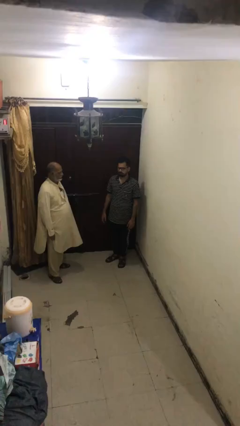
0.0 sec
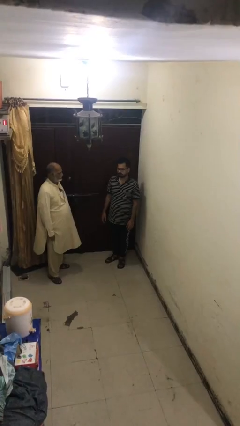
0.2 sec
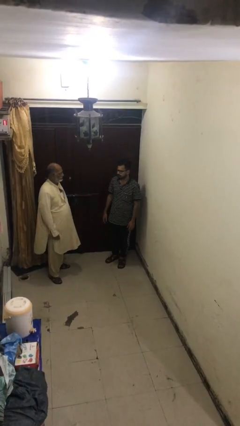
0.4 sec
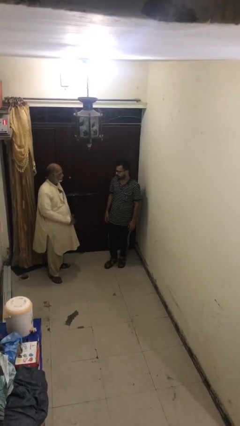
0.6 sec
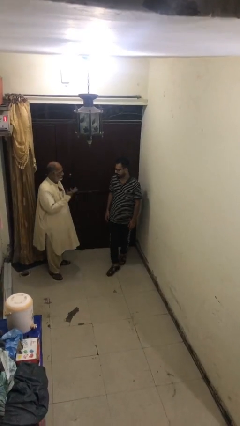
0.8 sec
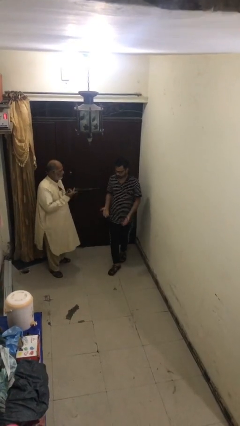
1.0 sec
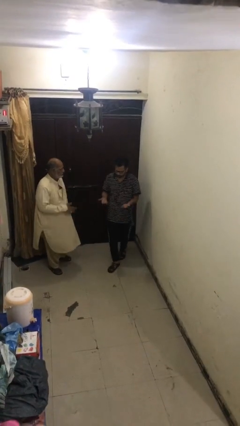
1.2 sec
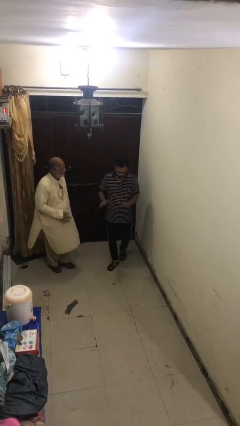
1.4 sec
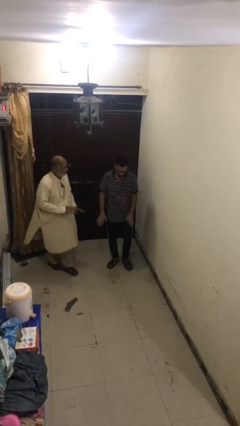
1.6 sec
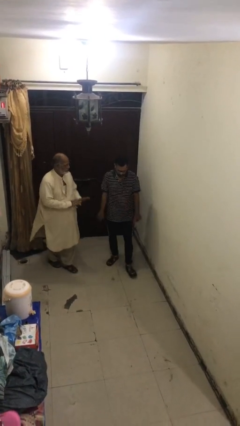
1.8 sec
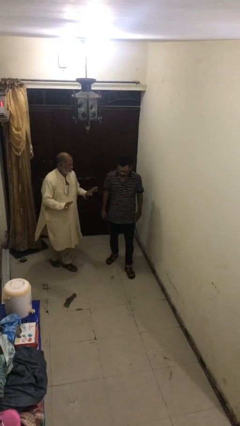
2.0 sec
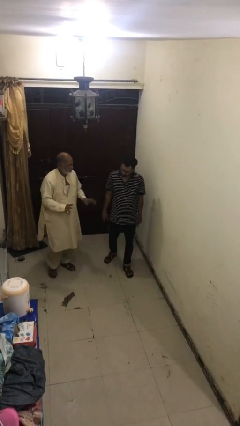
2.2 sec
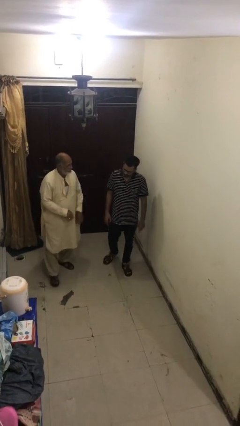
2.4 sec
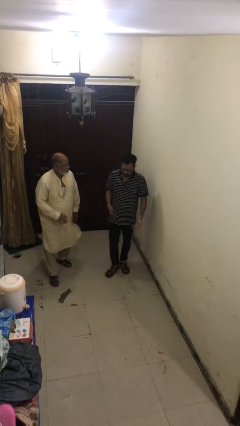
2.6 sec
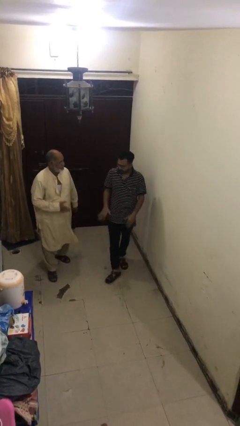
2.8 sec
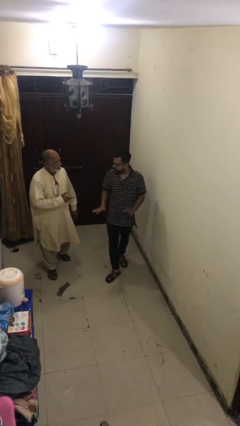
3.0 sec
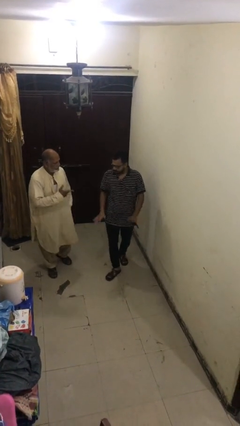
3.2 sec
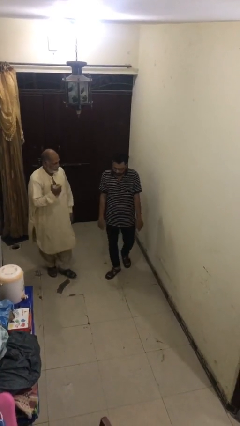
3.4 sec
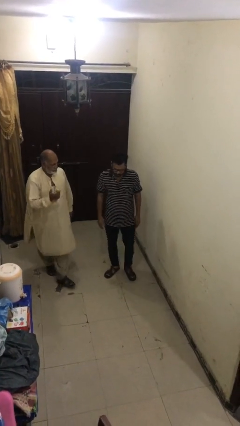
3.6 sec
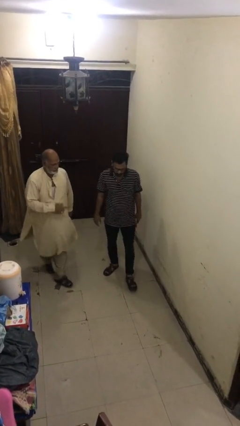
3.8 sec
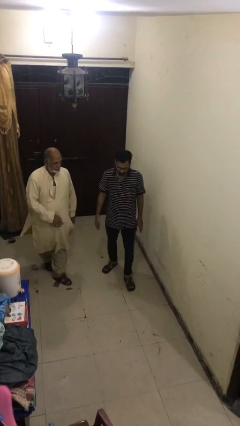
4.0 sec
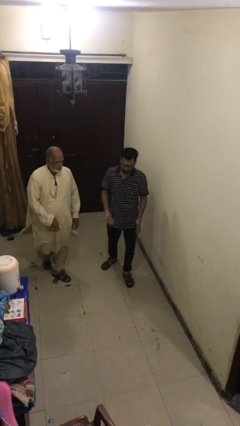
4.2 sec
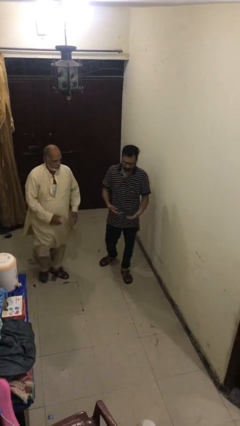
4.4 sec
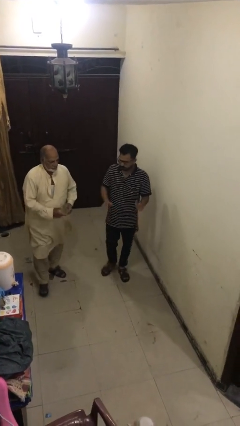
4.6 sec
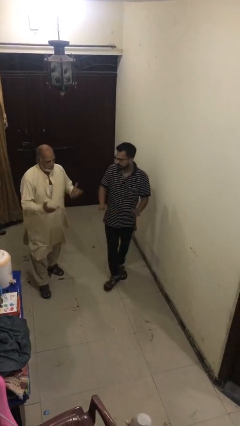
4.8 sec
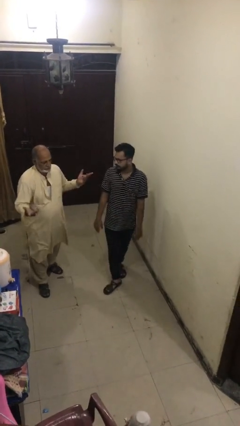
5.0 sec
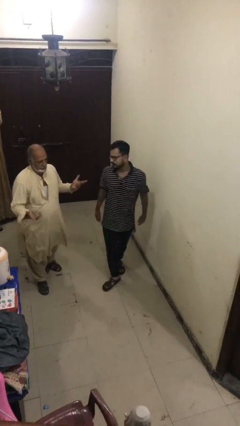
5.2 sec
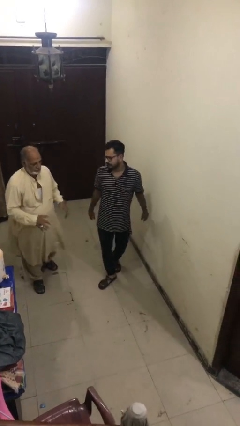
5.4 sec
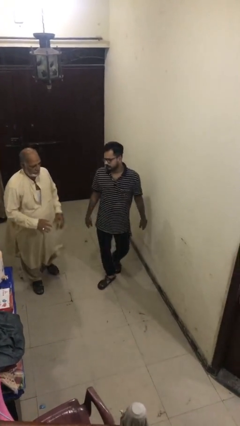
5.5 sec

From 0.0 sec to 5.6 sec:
person talks to person

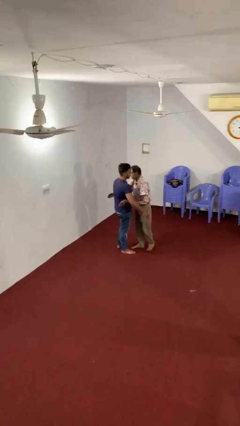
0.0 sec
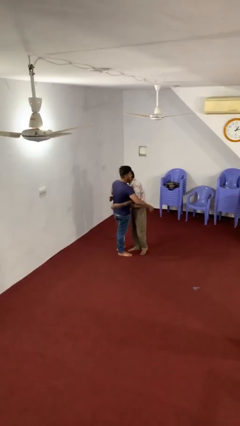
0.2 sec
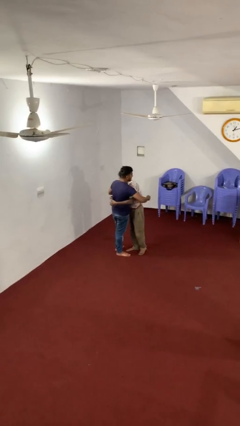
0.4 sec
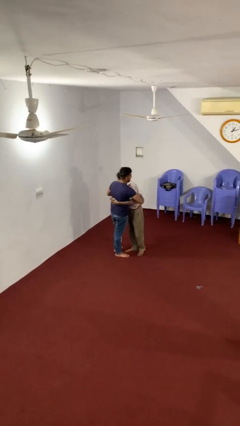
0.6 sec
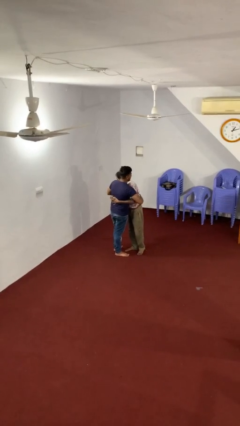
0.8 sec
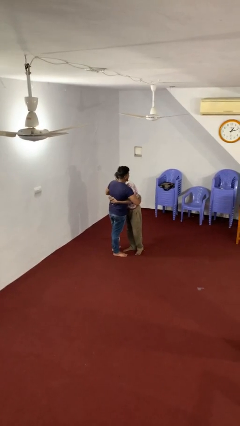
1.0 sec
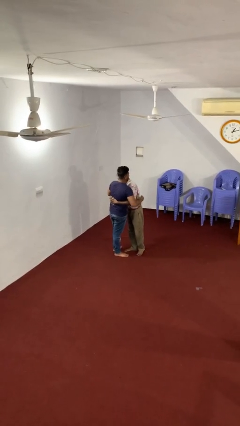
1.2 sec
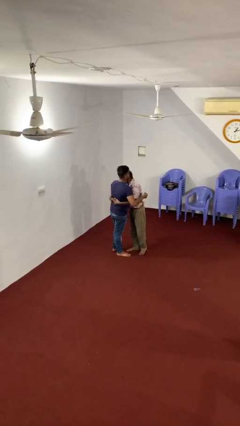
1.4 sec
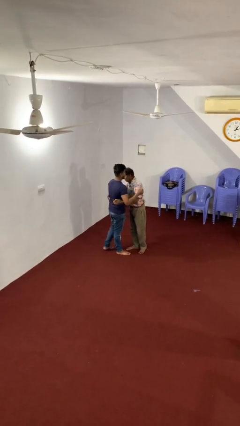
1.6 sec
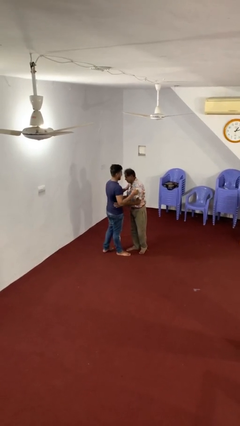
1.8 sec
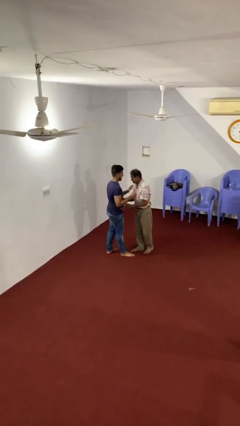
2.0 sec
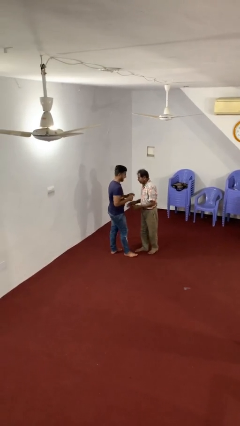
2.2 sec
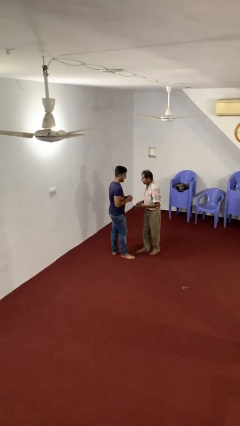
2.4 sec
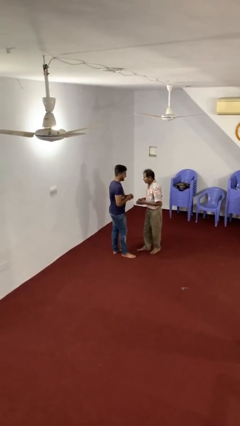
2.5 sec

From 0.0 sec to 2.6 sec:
person embraces person

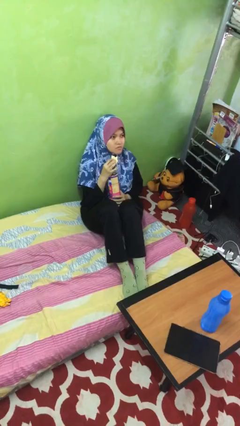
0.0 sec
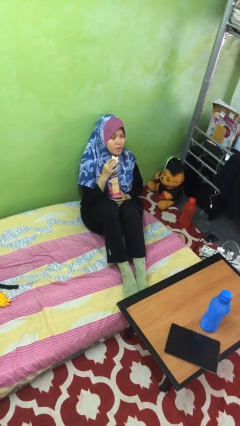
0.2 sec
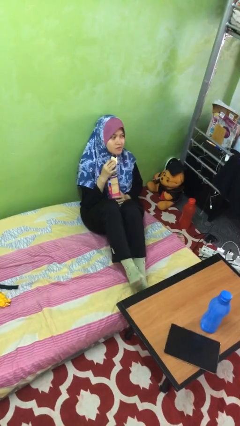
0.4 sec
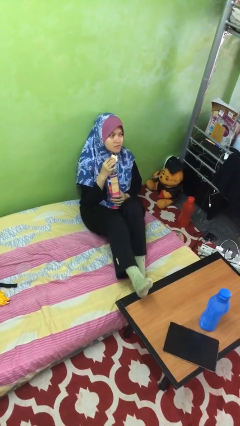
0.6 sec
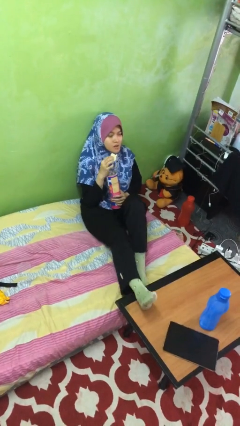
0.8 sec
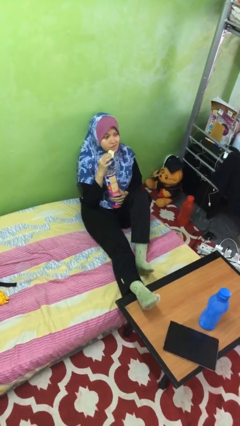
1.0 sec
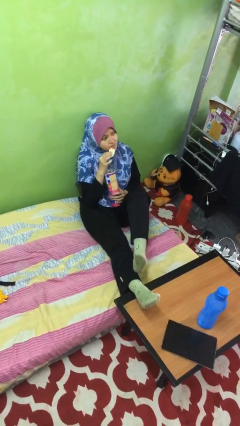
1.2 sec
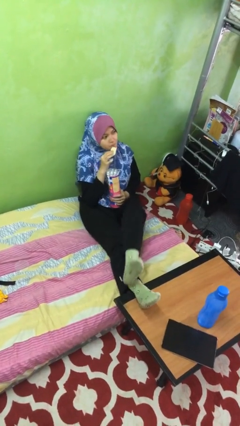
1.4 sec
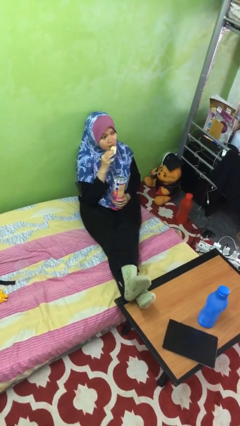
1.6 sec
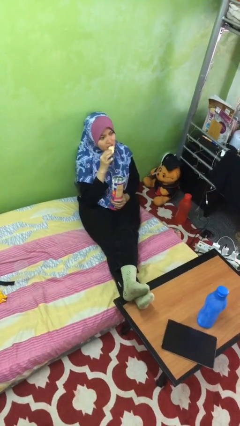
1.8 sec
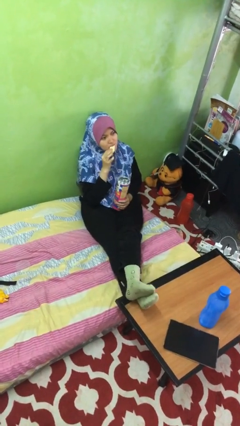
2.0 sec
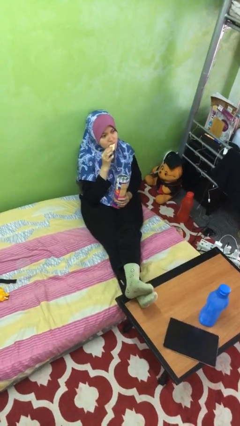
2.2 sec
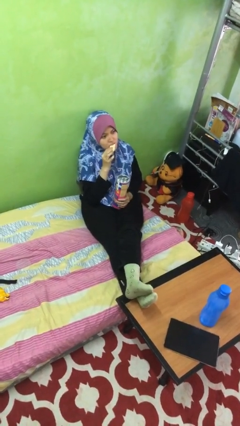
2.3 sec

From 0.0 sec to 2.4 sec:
person puts feet up

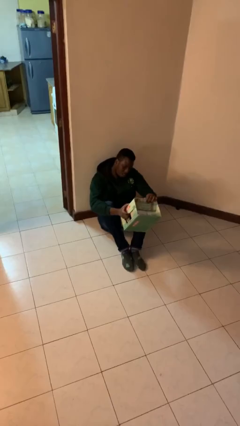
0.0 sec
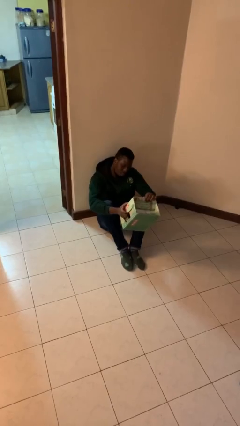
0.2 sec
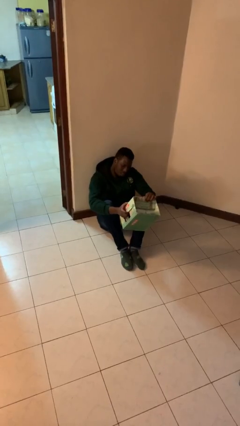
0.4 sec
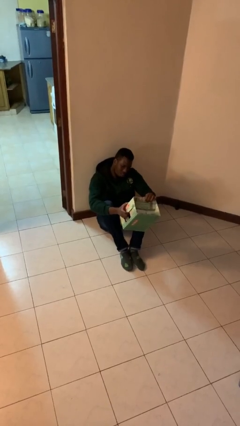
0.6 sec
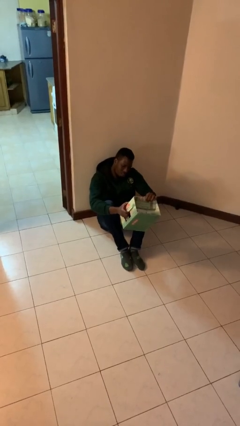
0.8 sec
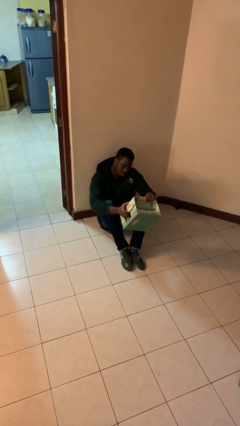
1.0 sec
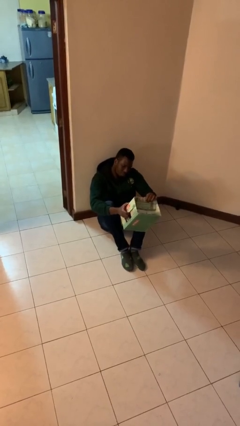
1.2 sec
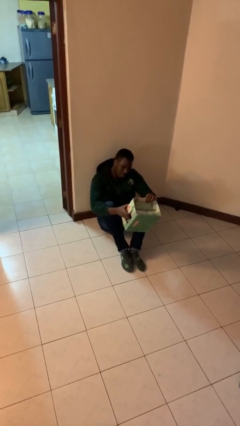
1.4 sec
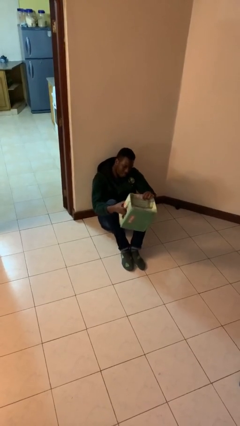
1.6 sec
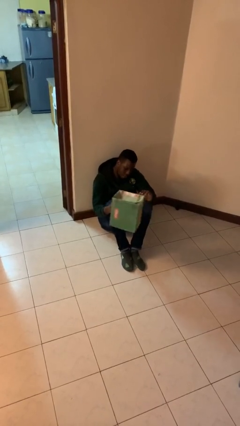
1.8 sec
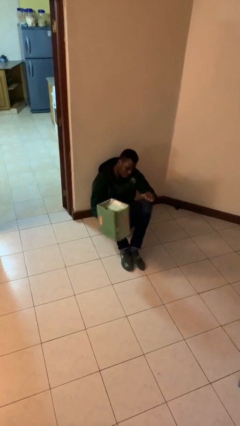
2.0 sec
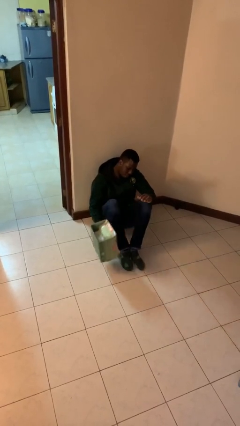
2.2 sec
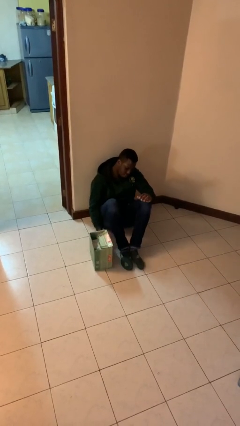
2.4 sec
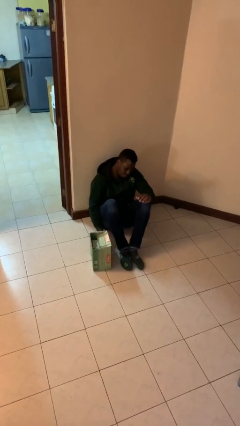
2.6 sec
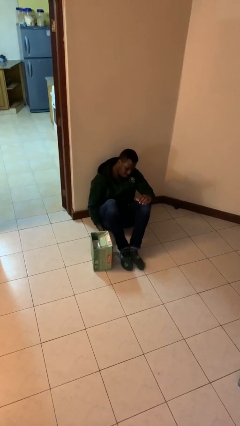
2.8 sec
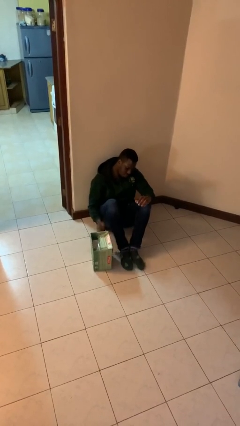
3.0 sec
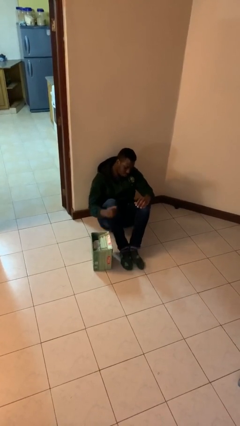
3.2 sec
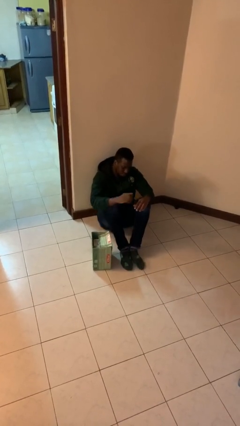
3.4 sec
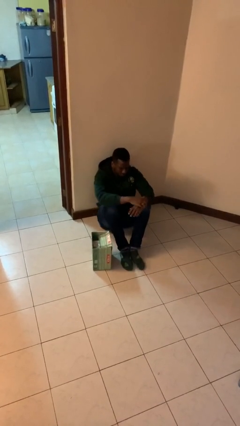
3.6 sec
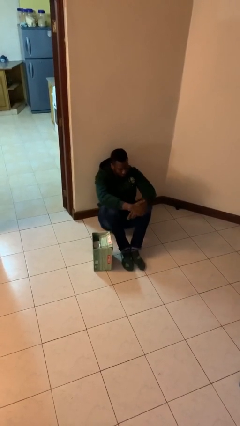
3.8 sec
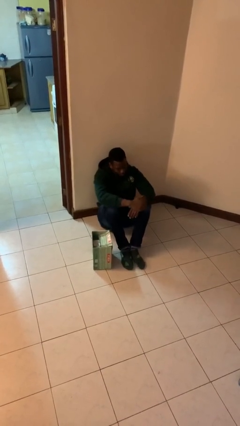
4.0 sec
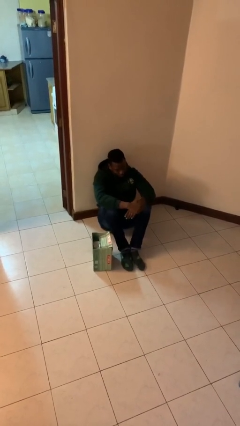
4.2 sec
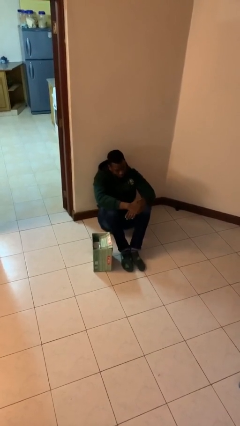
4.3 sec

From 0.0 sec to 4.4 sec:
person puts down object on floor

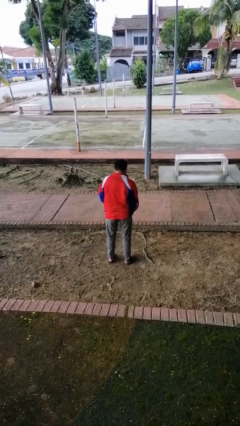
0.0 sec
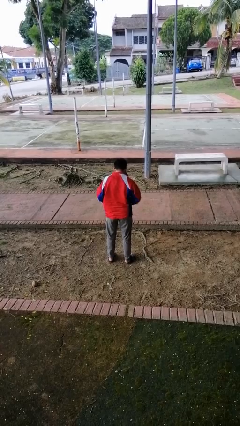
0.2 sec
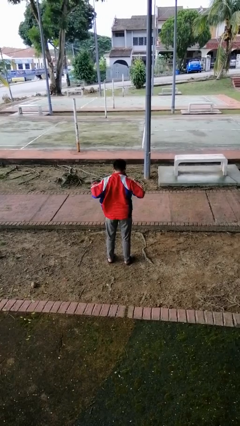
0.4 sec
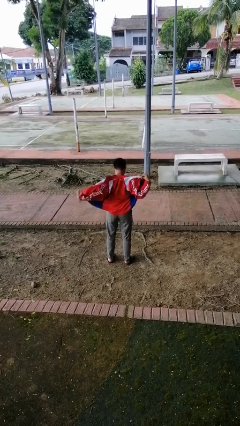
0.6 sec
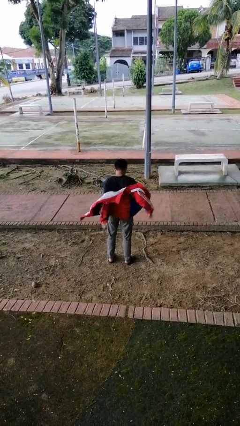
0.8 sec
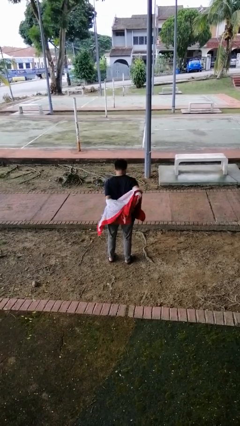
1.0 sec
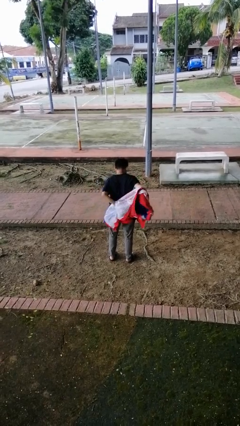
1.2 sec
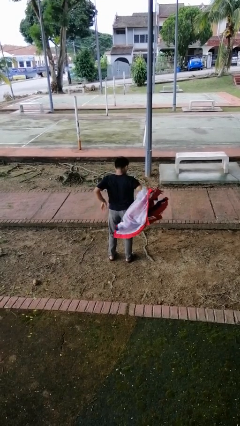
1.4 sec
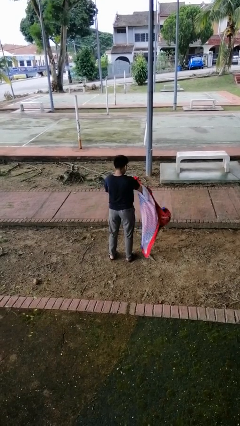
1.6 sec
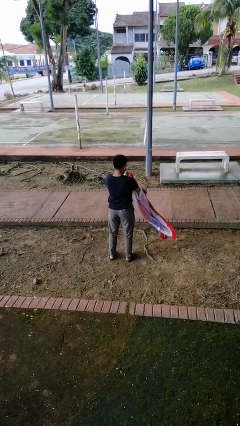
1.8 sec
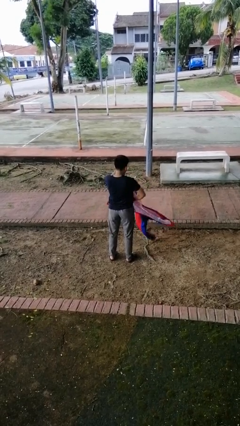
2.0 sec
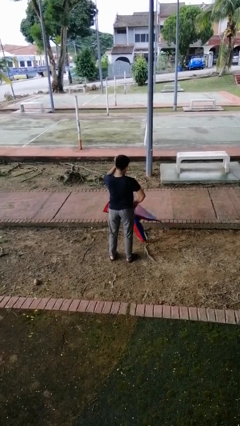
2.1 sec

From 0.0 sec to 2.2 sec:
person takes off jacket

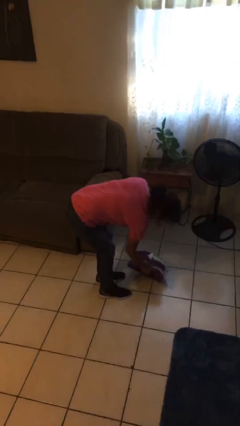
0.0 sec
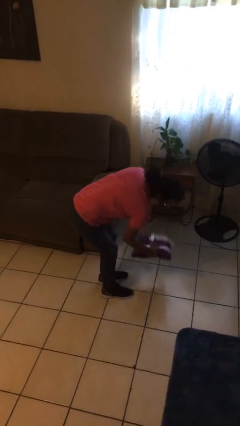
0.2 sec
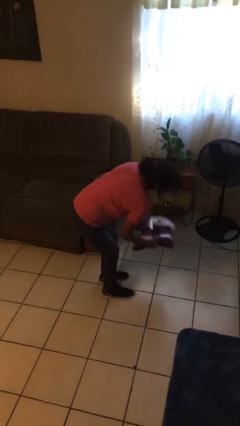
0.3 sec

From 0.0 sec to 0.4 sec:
person picks up object from floor
